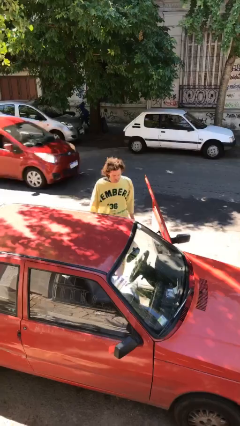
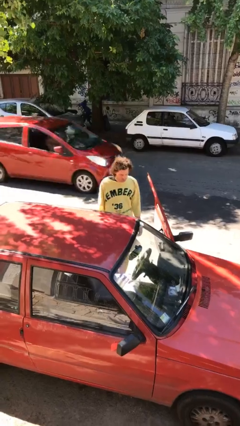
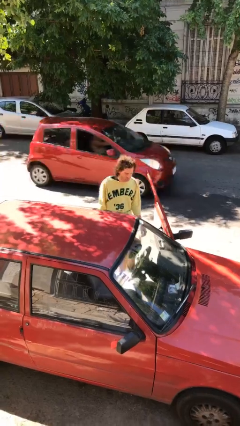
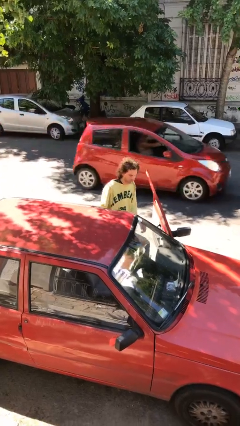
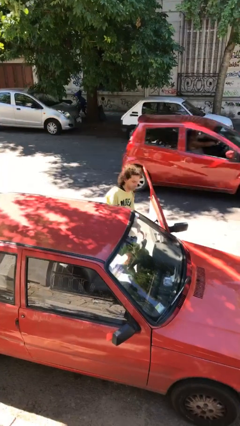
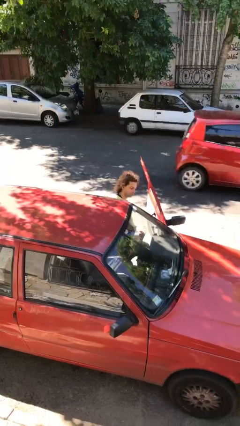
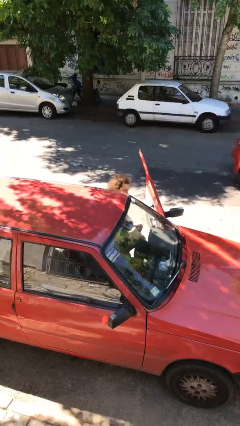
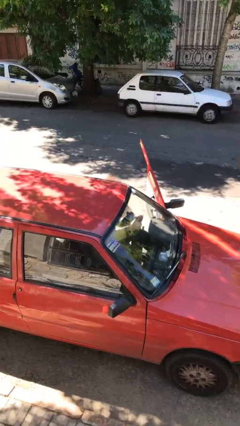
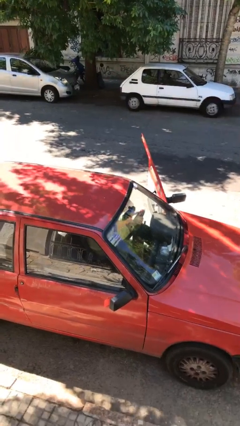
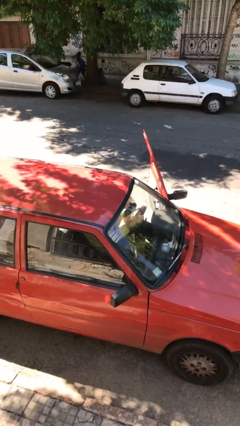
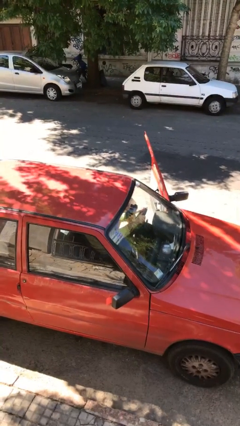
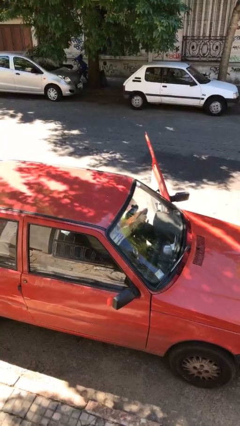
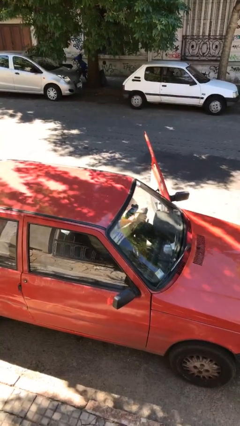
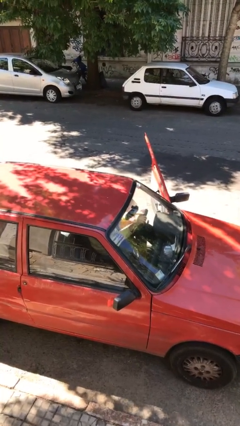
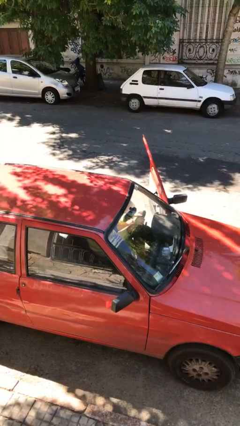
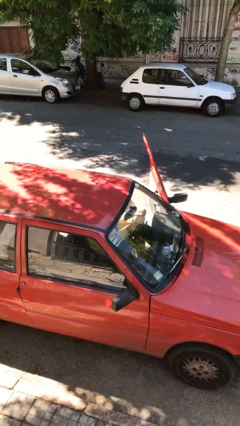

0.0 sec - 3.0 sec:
person enters car

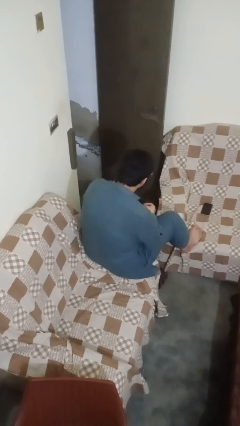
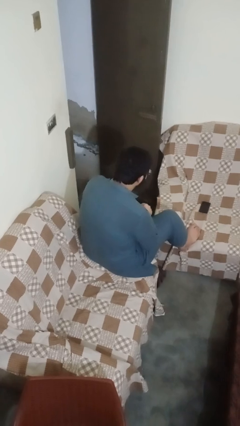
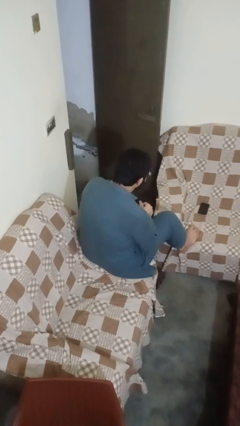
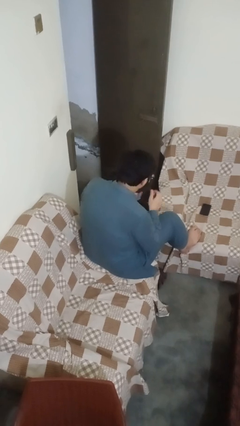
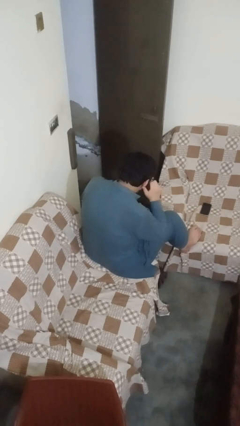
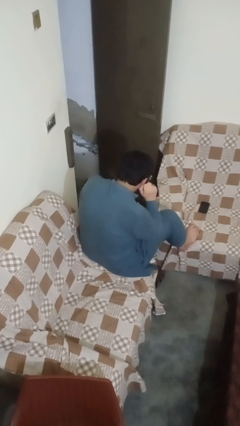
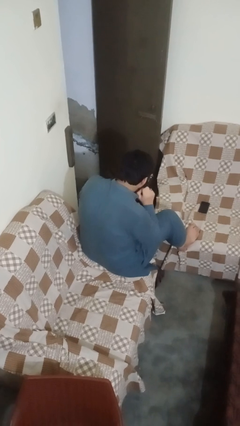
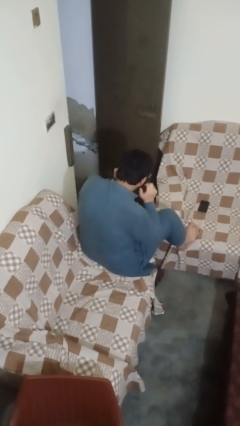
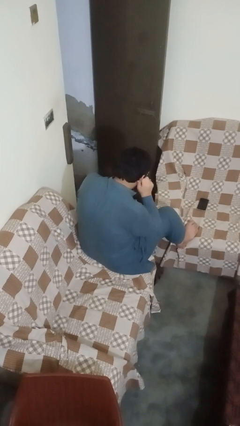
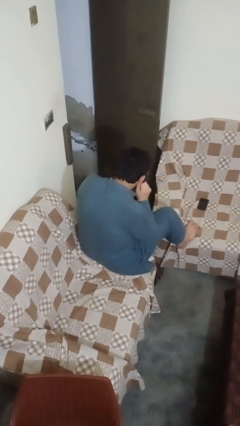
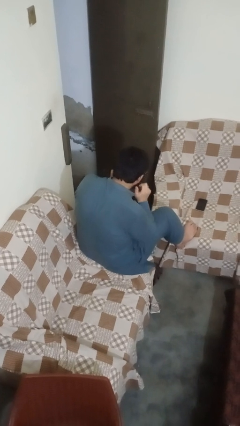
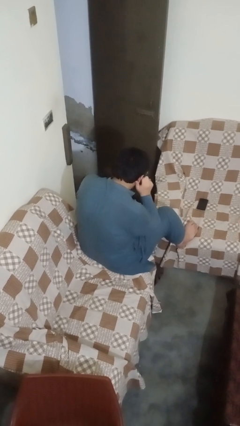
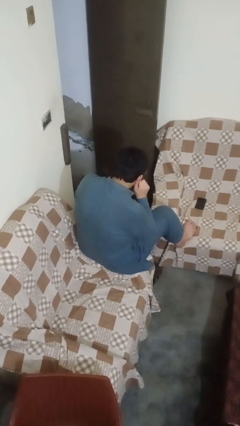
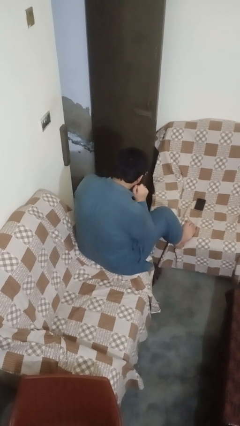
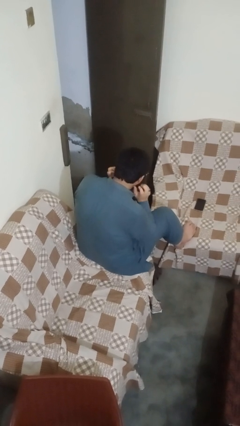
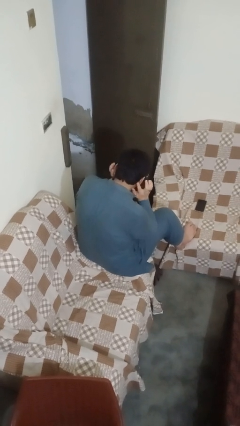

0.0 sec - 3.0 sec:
person touches earlobe

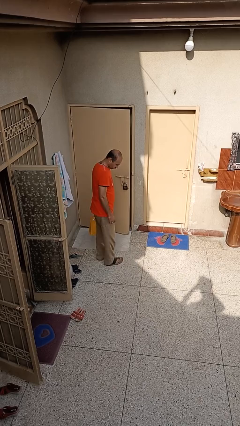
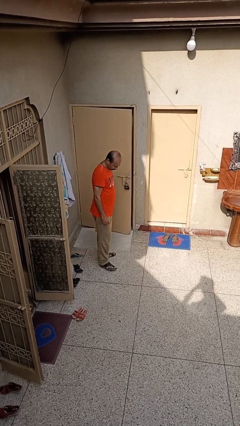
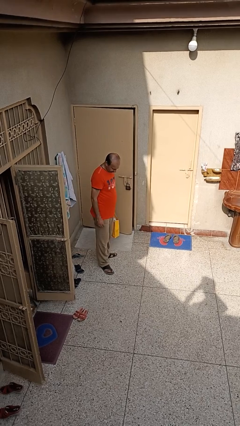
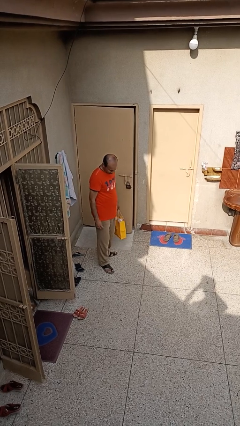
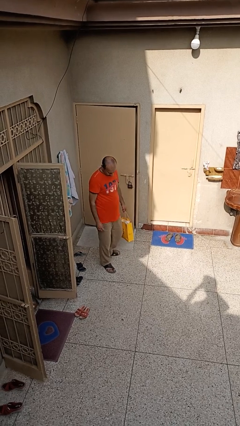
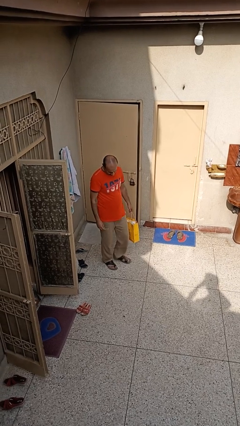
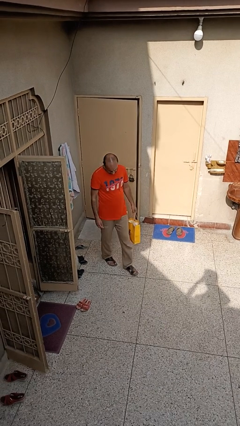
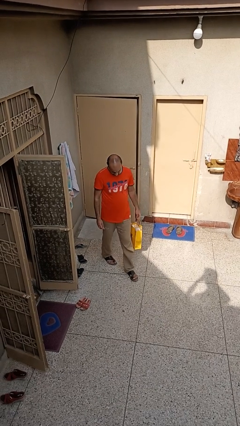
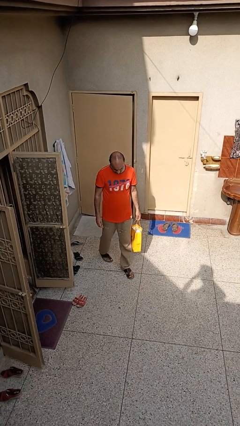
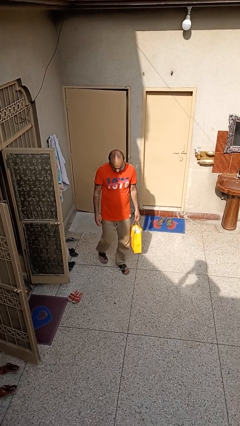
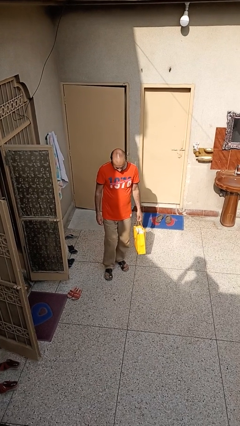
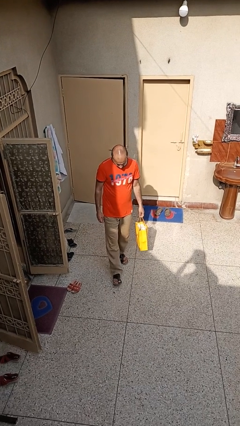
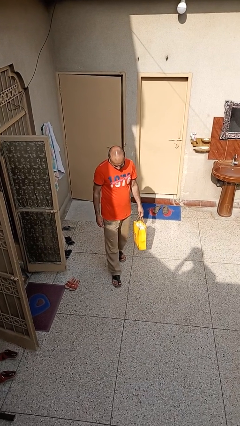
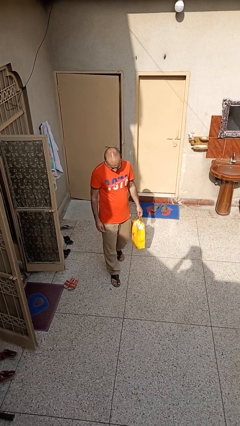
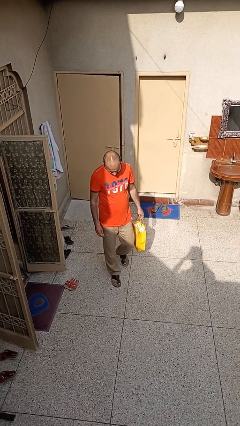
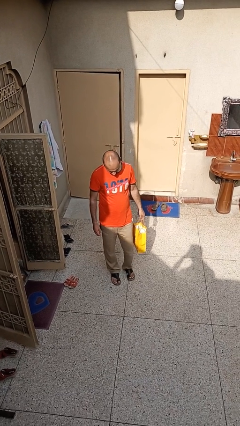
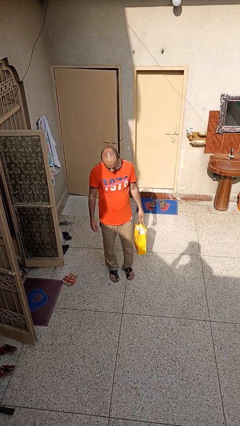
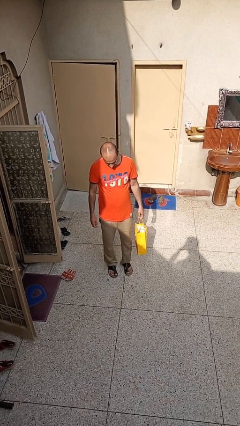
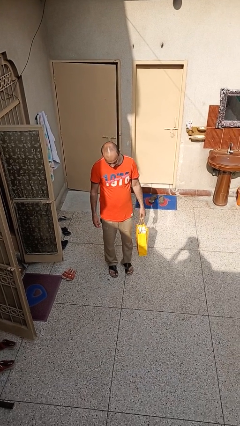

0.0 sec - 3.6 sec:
person carries groceries

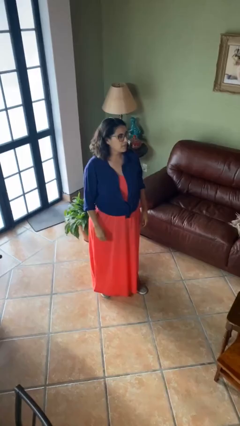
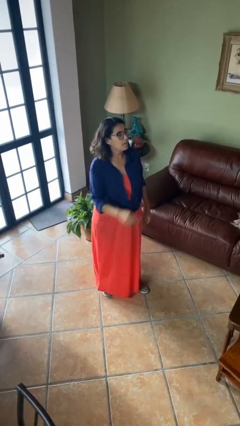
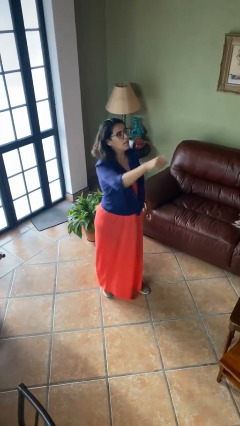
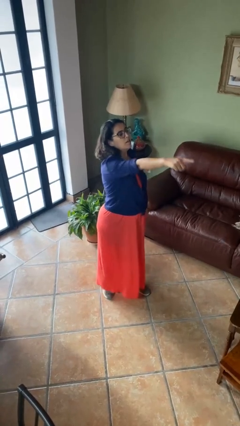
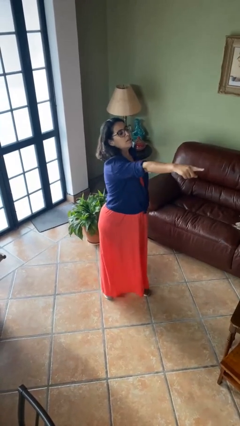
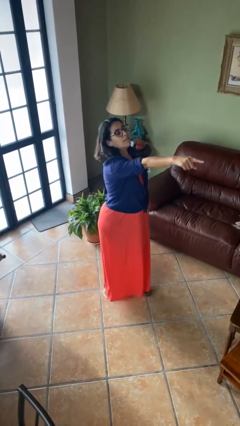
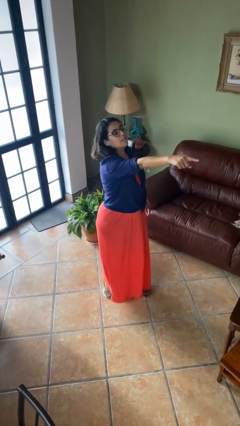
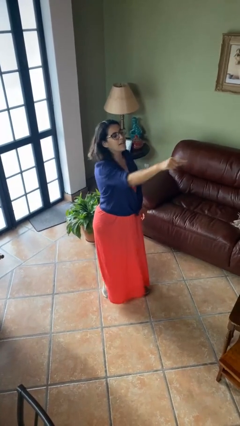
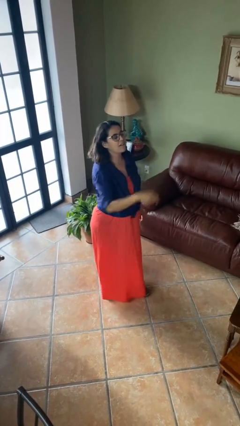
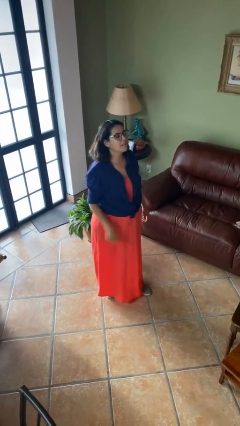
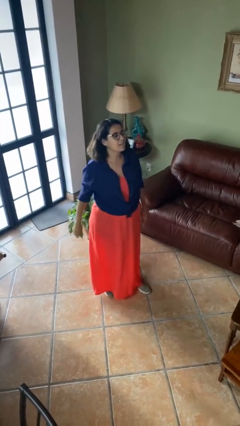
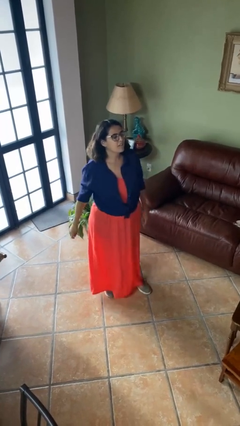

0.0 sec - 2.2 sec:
person points at person

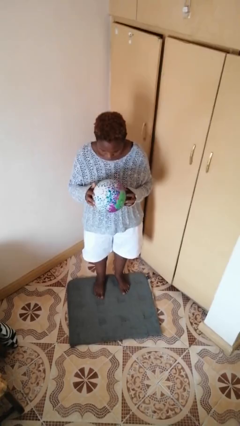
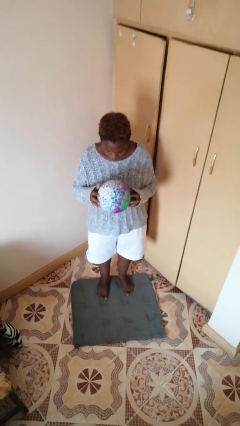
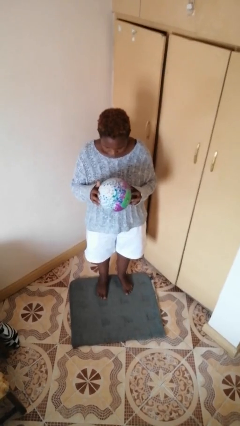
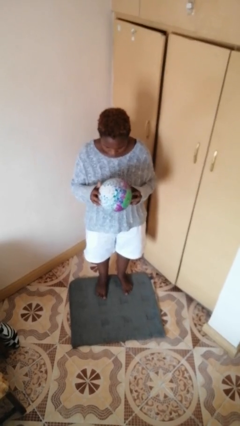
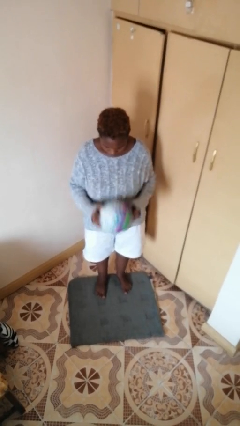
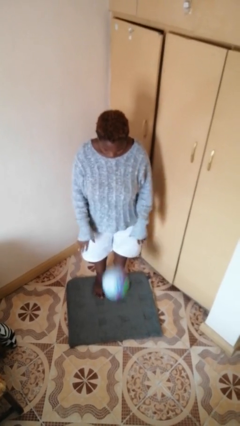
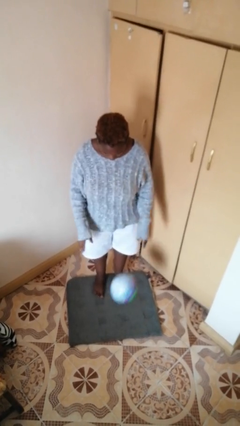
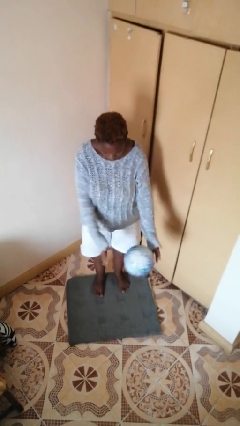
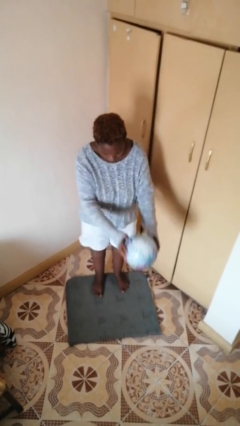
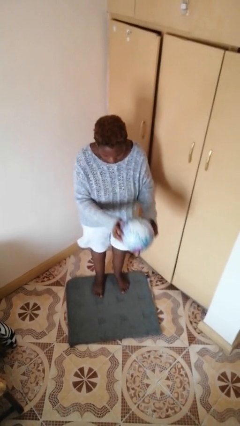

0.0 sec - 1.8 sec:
person bounces ball on floor

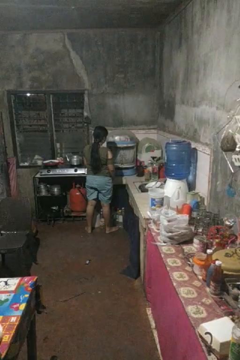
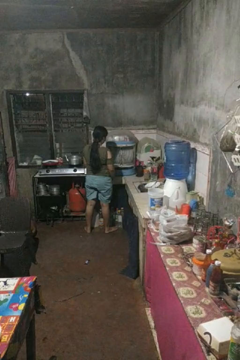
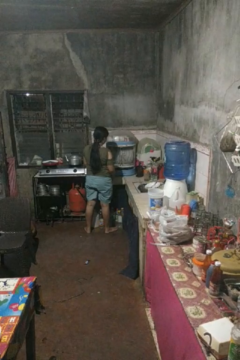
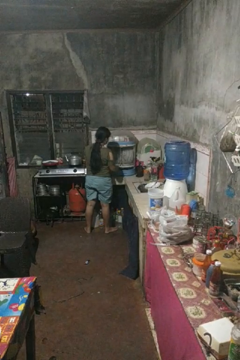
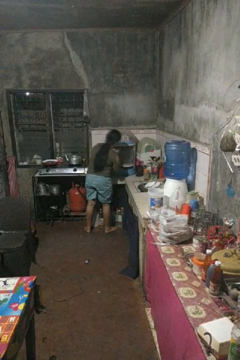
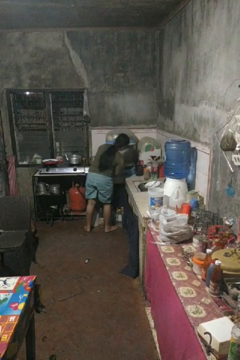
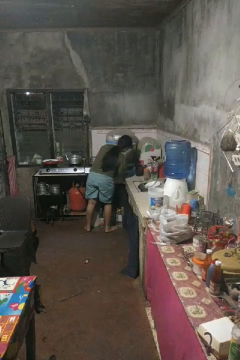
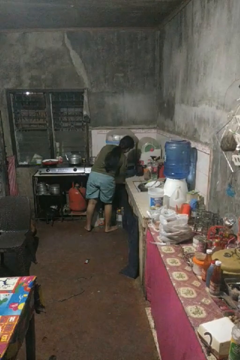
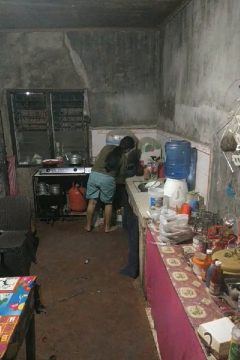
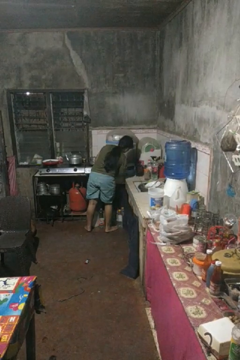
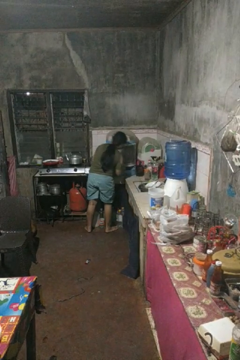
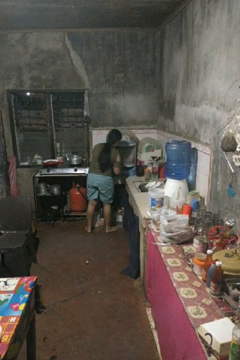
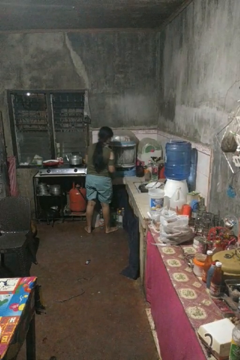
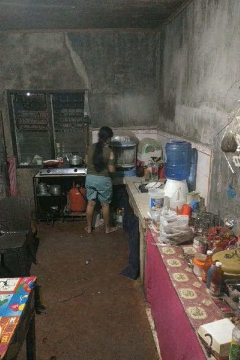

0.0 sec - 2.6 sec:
person searches in kitchen drawer

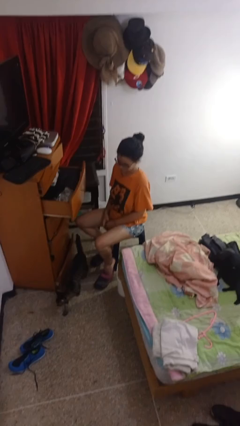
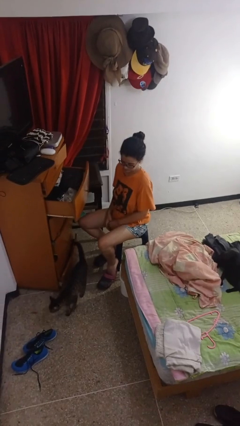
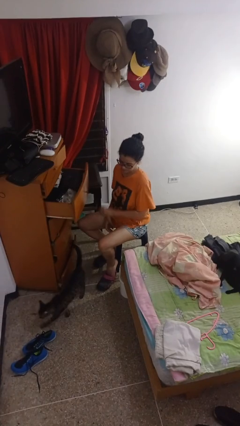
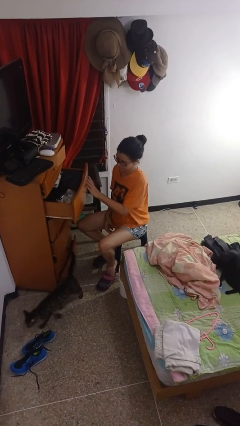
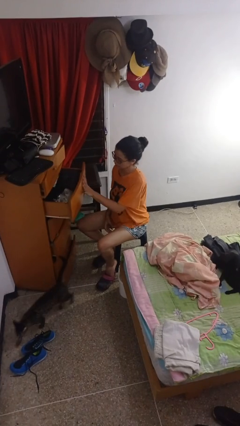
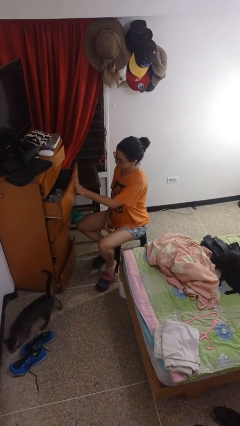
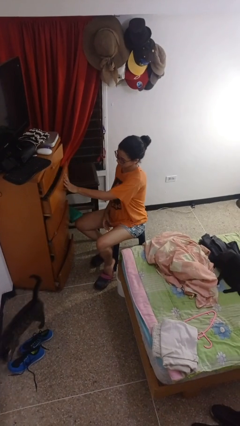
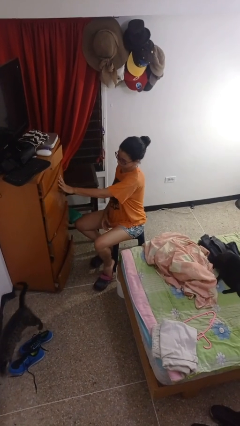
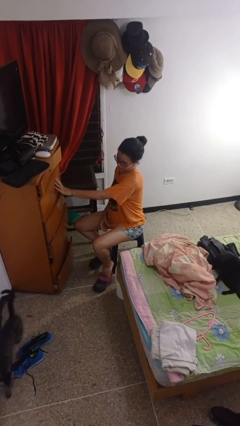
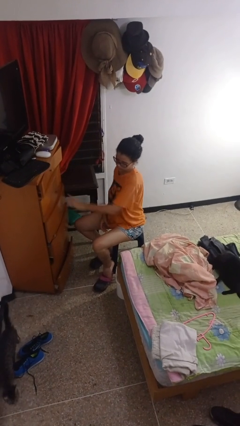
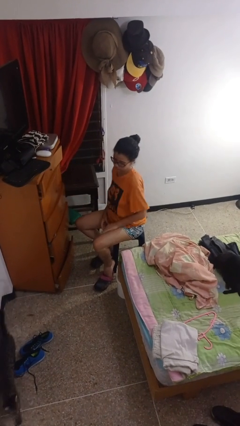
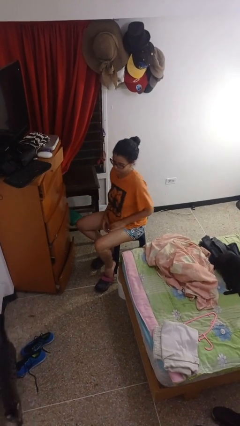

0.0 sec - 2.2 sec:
person closes dresser drawer
